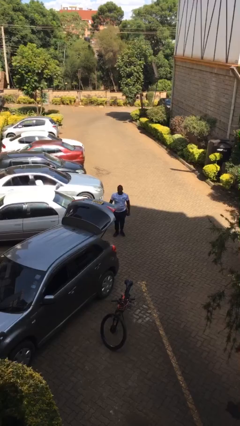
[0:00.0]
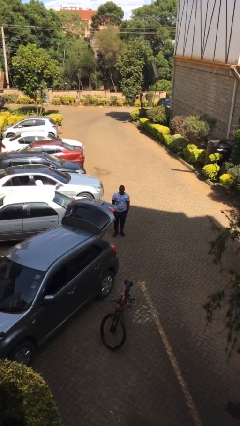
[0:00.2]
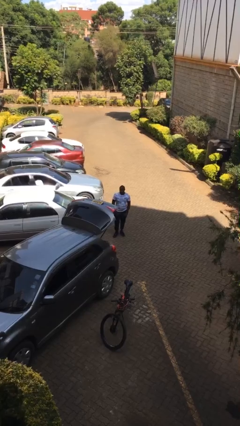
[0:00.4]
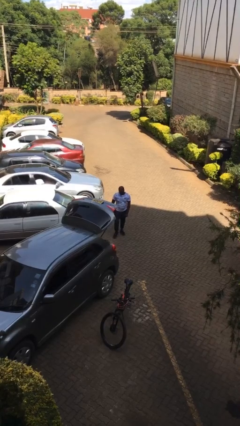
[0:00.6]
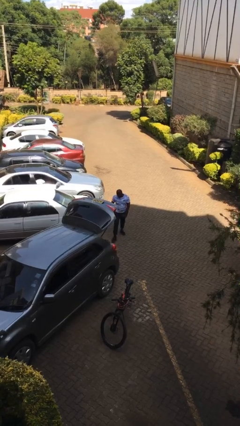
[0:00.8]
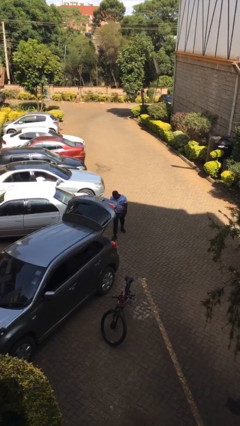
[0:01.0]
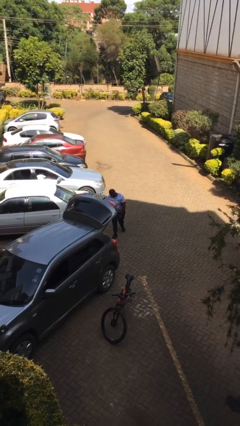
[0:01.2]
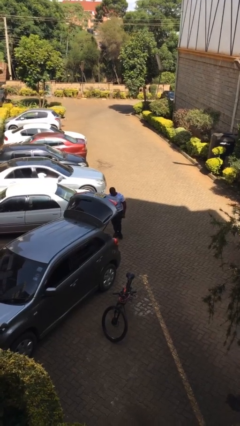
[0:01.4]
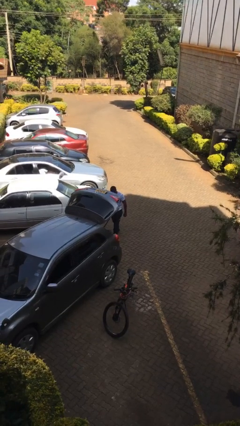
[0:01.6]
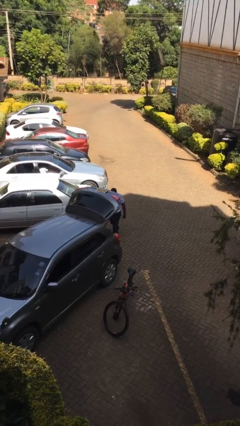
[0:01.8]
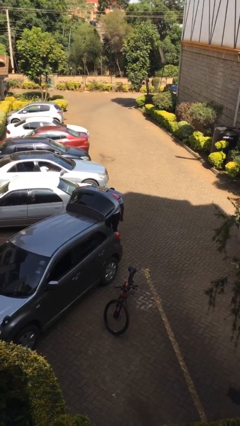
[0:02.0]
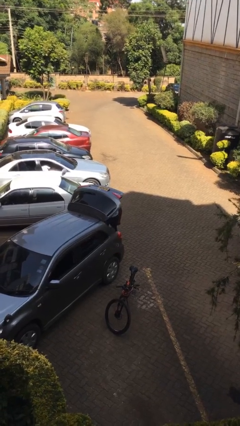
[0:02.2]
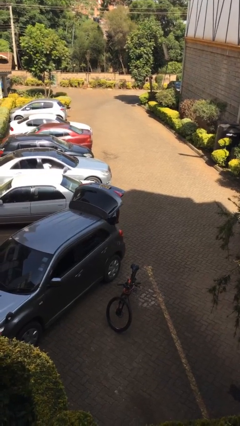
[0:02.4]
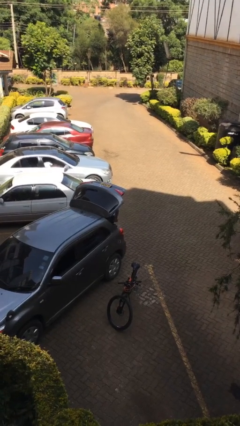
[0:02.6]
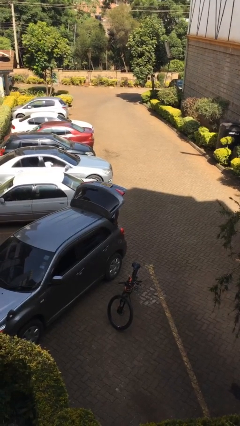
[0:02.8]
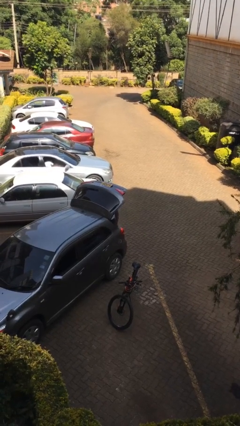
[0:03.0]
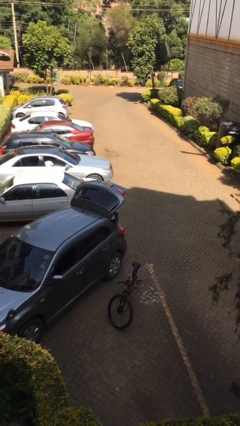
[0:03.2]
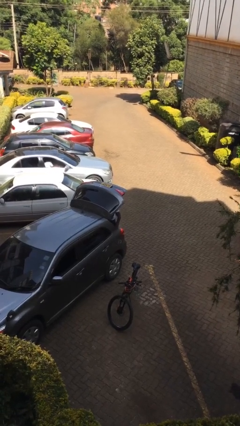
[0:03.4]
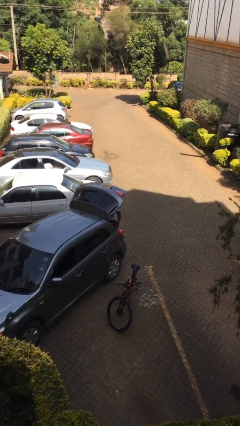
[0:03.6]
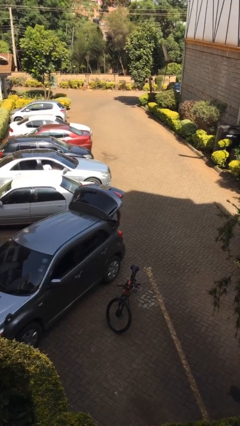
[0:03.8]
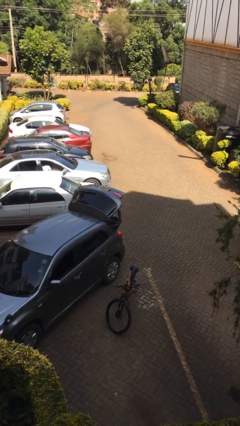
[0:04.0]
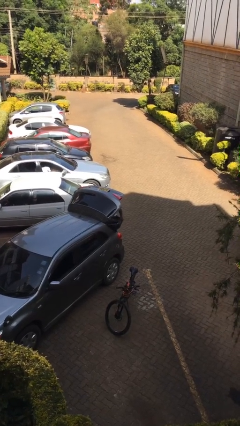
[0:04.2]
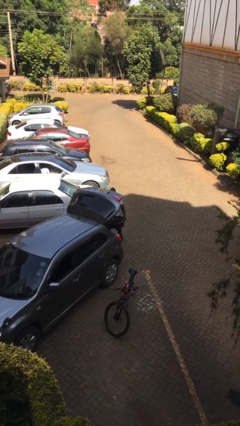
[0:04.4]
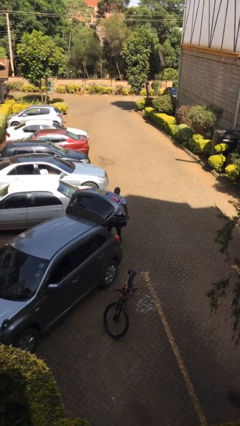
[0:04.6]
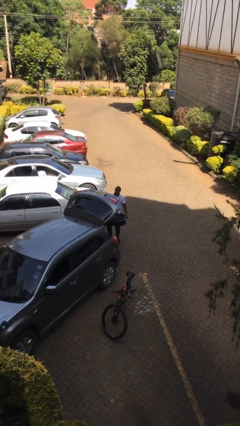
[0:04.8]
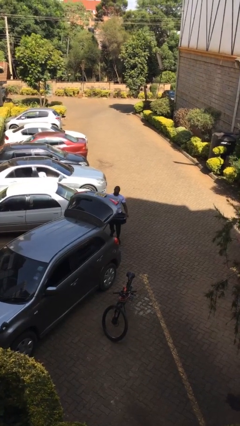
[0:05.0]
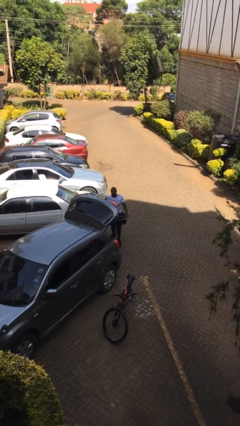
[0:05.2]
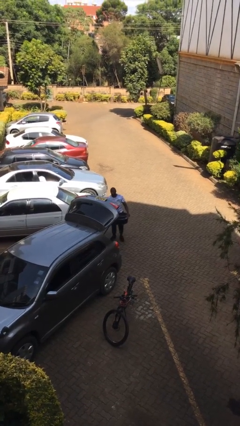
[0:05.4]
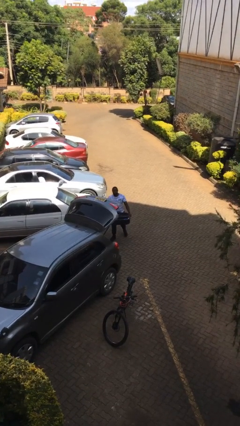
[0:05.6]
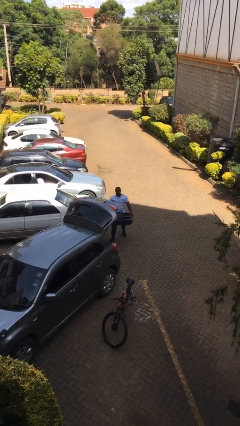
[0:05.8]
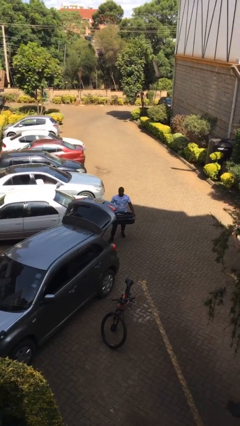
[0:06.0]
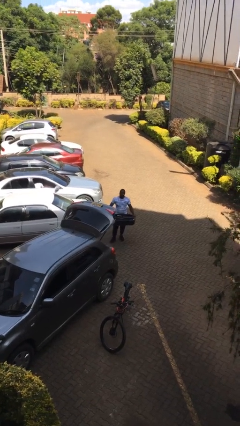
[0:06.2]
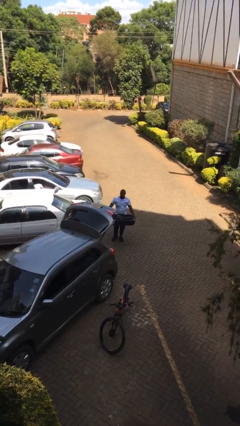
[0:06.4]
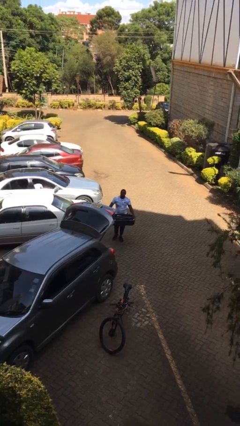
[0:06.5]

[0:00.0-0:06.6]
person unloads car

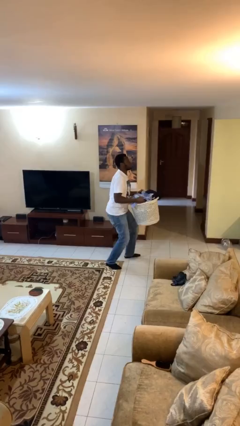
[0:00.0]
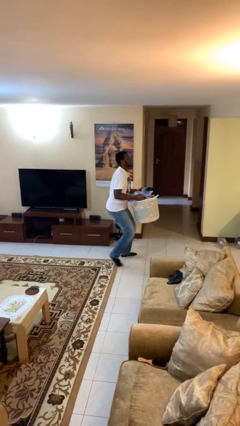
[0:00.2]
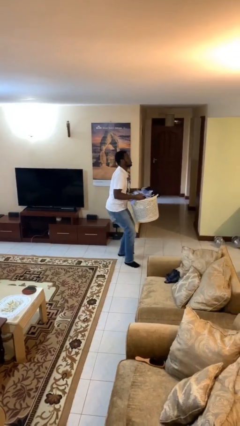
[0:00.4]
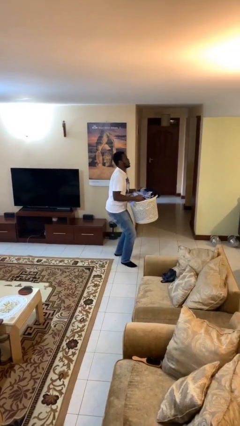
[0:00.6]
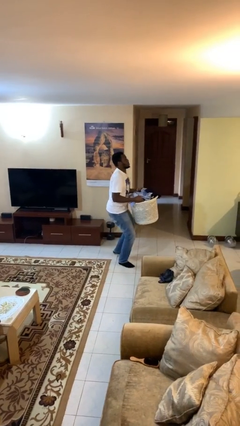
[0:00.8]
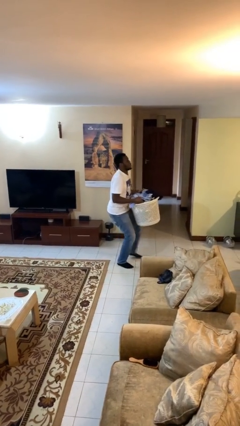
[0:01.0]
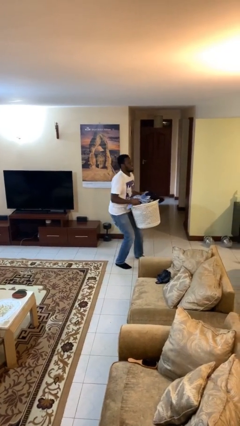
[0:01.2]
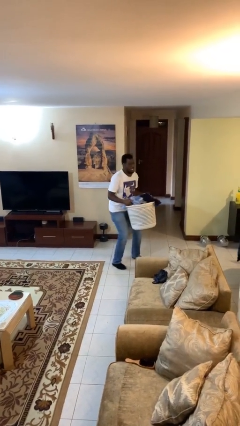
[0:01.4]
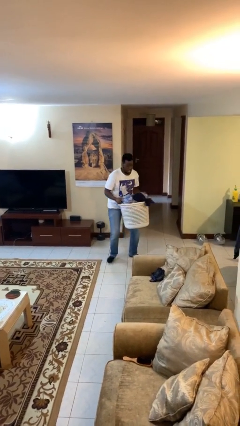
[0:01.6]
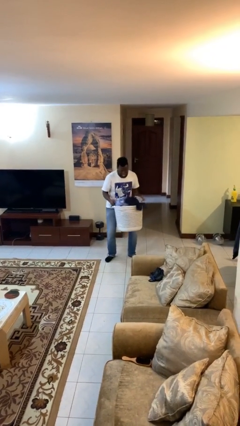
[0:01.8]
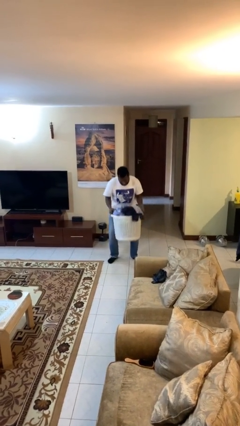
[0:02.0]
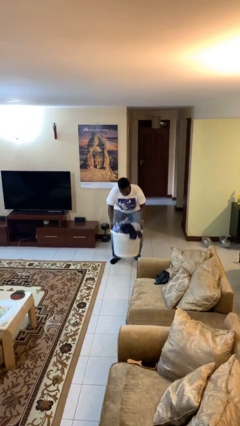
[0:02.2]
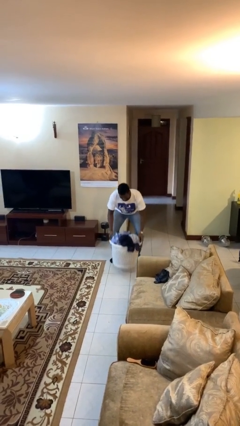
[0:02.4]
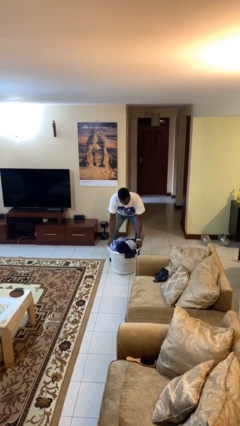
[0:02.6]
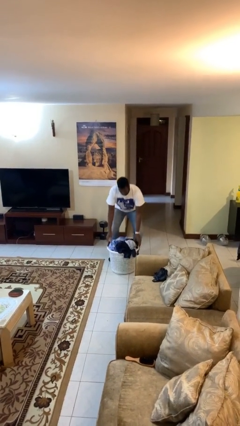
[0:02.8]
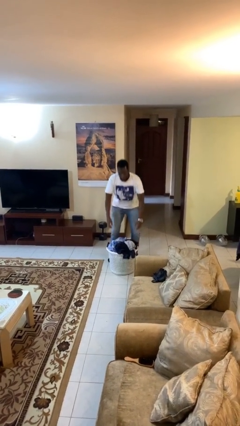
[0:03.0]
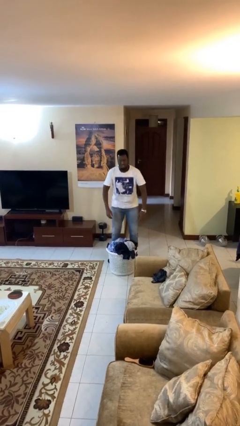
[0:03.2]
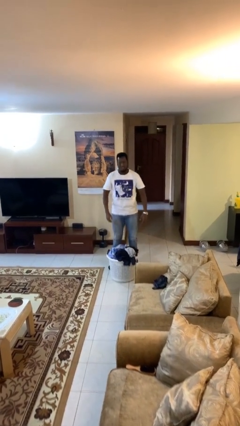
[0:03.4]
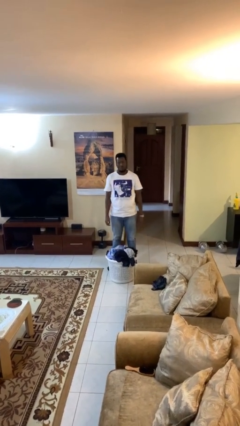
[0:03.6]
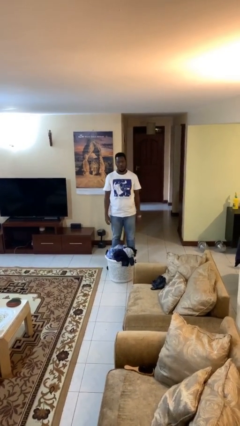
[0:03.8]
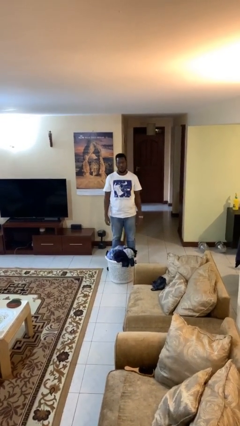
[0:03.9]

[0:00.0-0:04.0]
person puts down object on floor

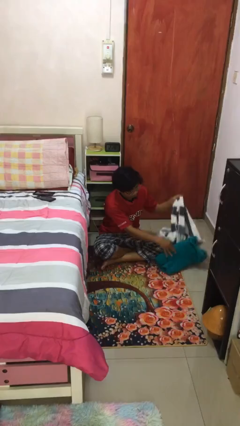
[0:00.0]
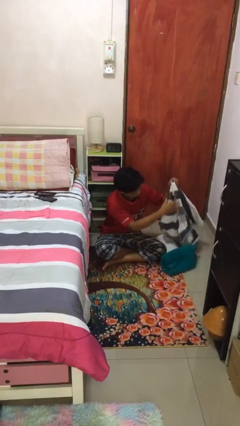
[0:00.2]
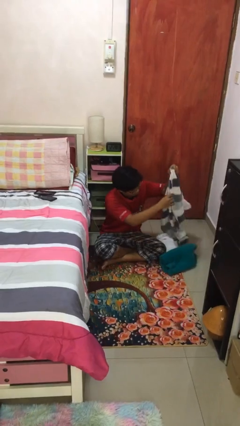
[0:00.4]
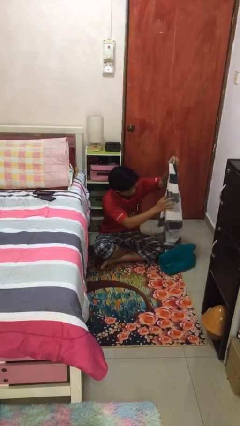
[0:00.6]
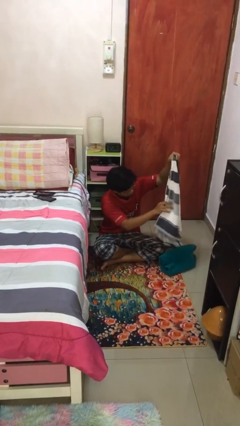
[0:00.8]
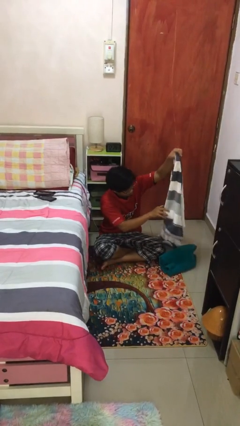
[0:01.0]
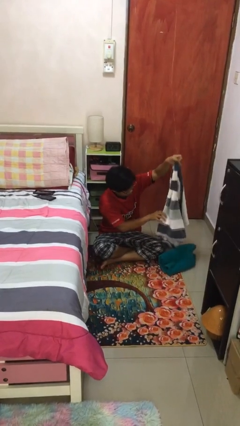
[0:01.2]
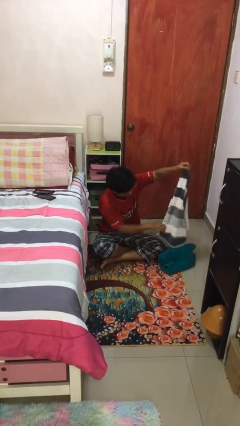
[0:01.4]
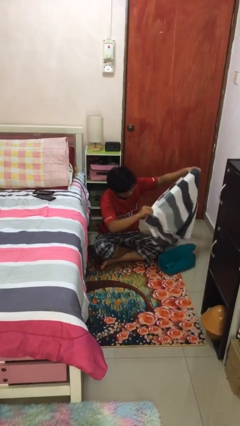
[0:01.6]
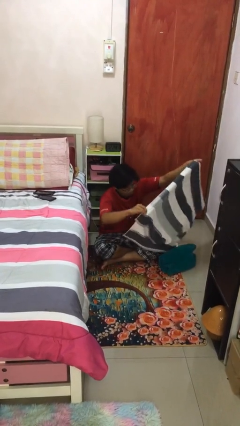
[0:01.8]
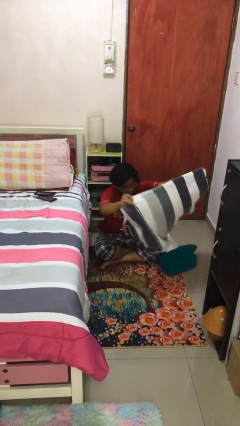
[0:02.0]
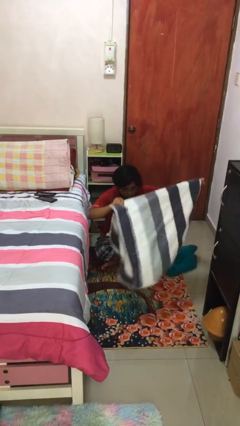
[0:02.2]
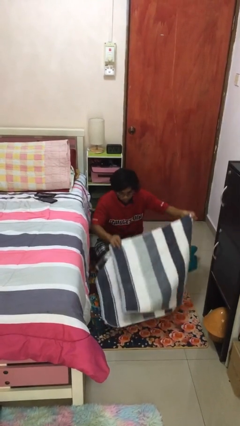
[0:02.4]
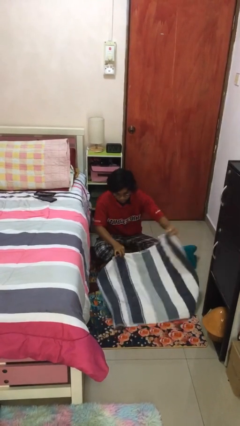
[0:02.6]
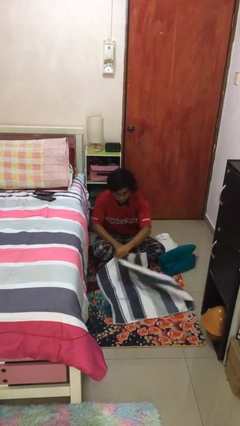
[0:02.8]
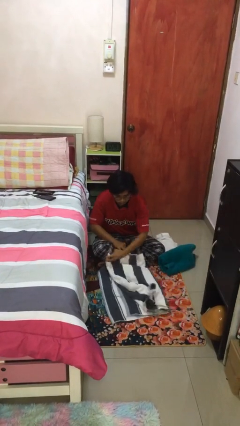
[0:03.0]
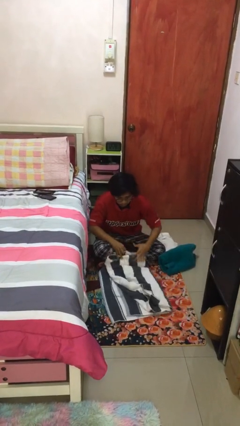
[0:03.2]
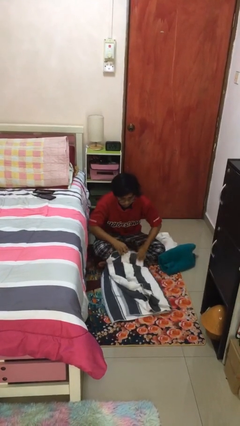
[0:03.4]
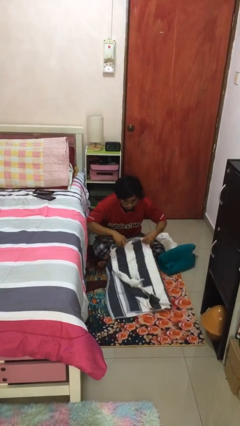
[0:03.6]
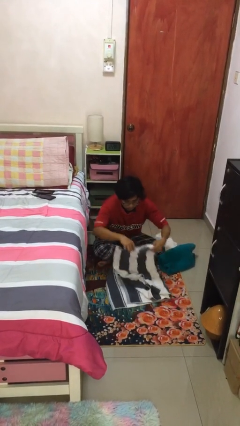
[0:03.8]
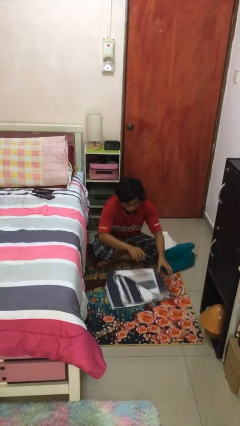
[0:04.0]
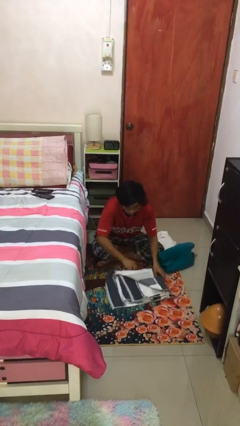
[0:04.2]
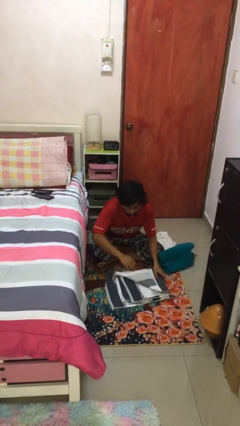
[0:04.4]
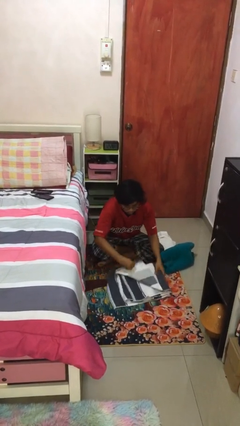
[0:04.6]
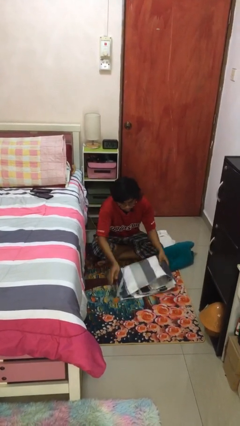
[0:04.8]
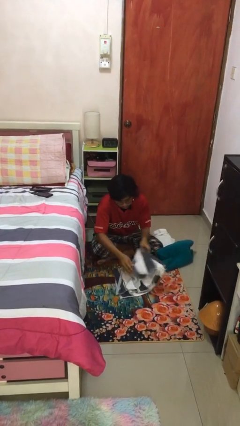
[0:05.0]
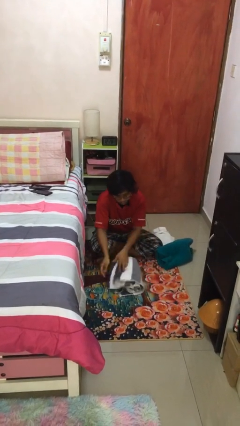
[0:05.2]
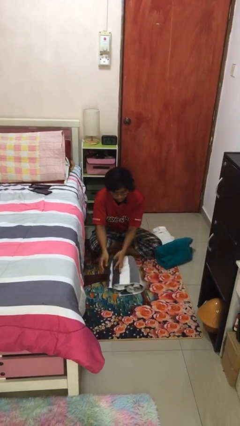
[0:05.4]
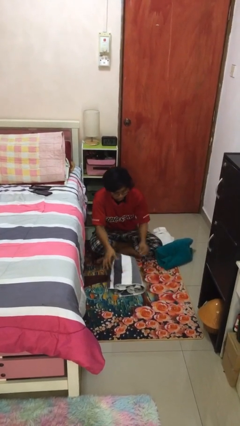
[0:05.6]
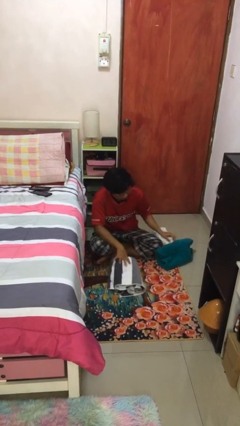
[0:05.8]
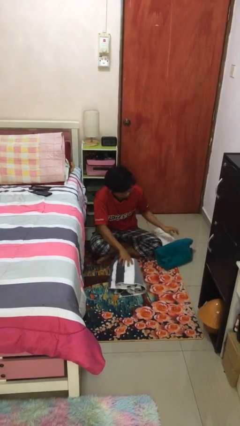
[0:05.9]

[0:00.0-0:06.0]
person folds towel

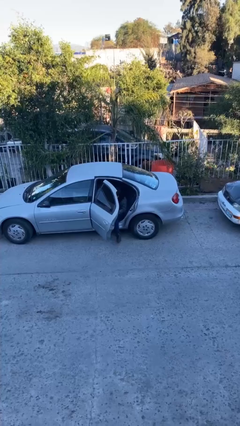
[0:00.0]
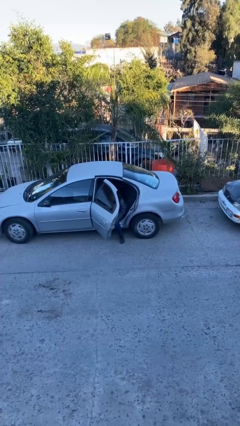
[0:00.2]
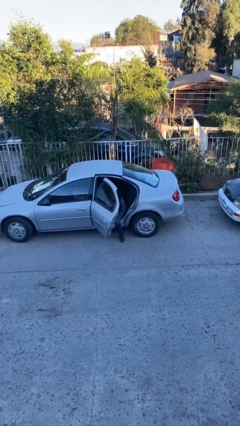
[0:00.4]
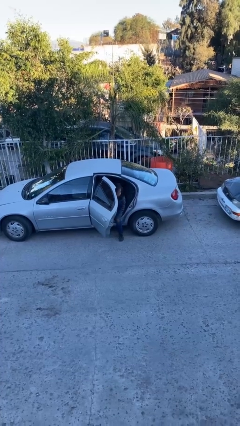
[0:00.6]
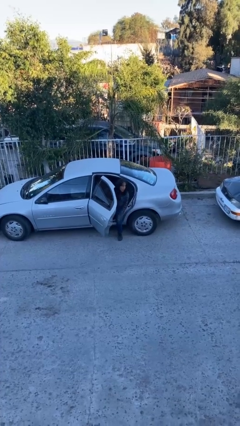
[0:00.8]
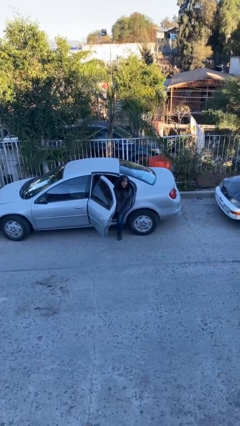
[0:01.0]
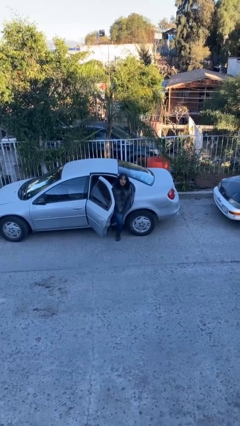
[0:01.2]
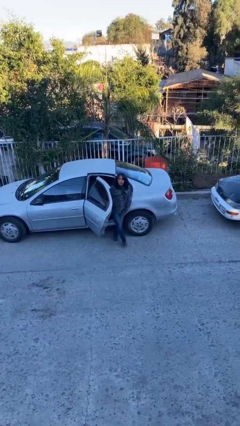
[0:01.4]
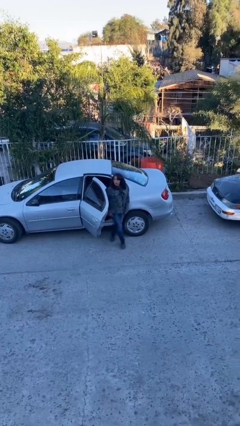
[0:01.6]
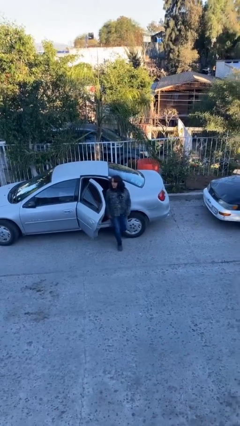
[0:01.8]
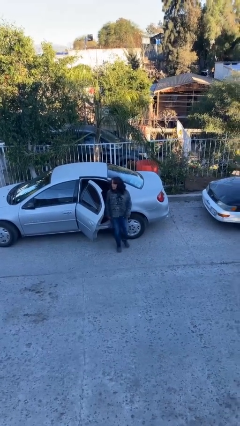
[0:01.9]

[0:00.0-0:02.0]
person exits car
